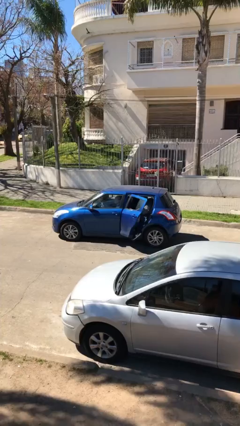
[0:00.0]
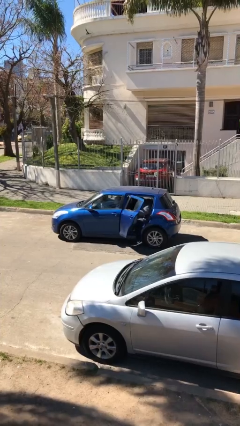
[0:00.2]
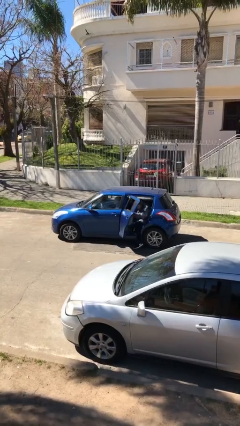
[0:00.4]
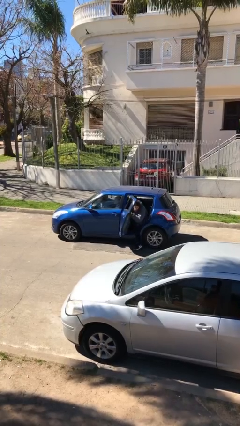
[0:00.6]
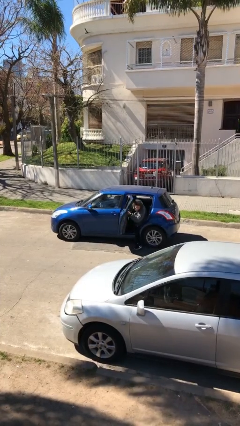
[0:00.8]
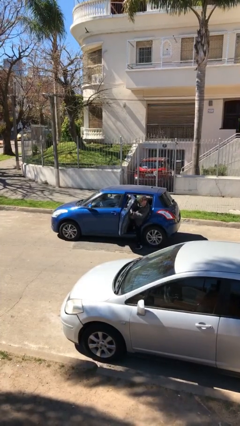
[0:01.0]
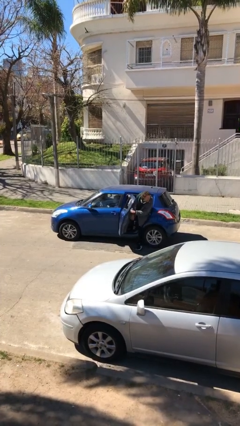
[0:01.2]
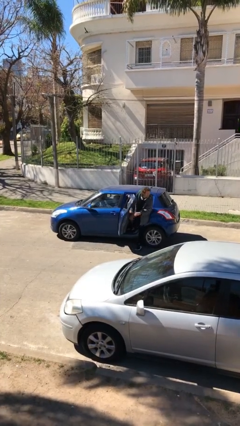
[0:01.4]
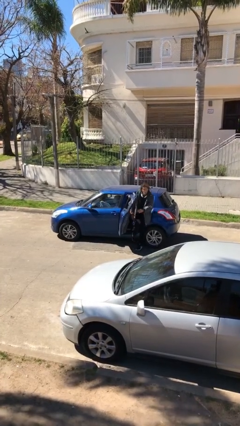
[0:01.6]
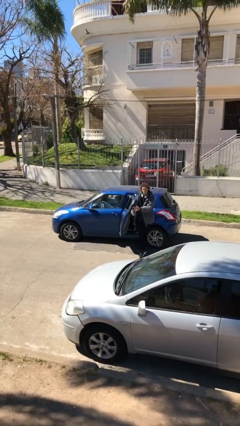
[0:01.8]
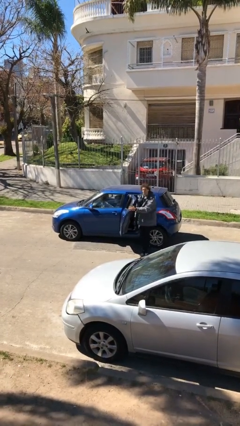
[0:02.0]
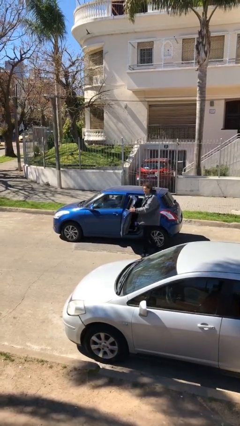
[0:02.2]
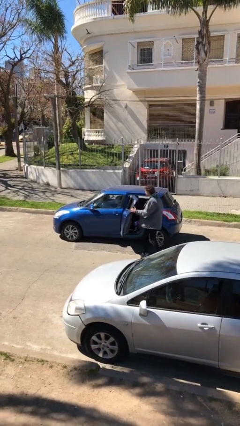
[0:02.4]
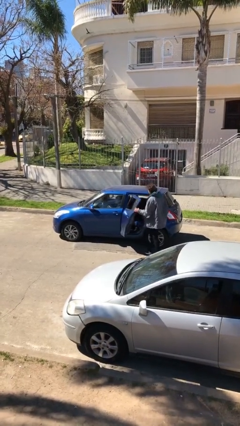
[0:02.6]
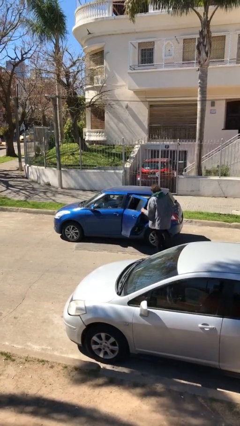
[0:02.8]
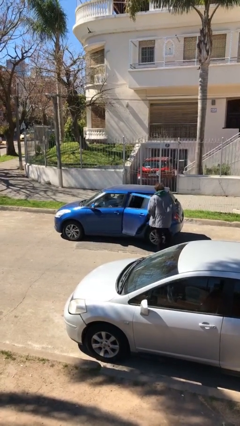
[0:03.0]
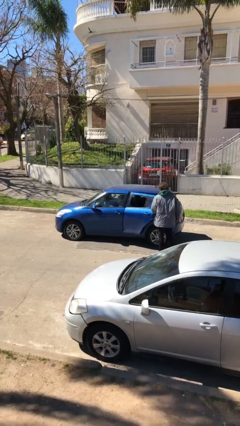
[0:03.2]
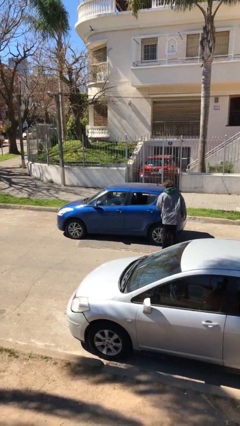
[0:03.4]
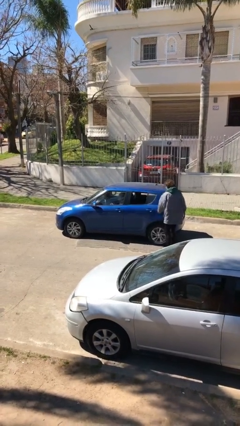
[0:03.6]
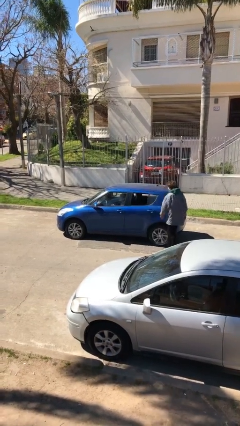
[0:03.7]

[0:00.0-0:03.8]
car drops off person

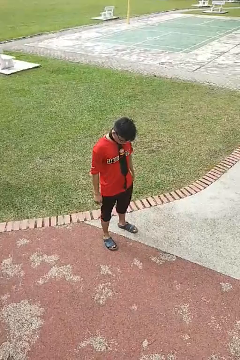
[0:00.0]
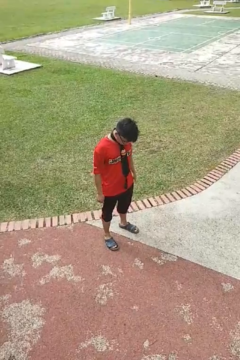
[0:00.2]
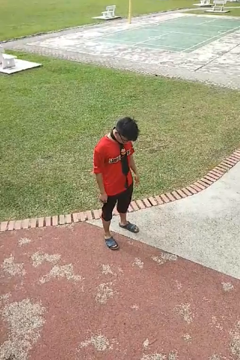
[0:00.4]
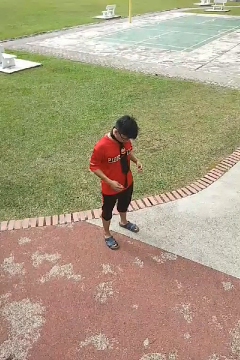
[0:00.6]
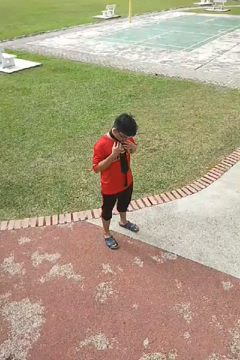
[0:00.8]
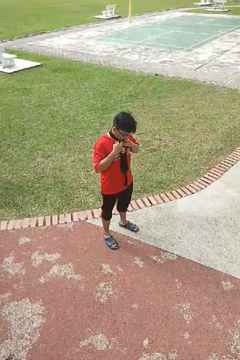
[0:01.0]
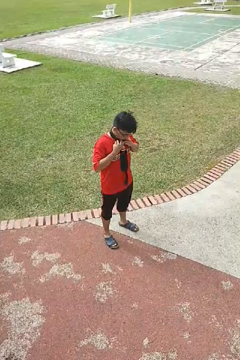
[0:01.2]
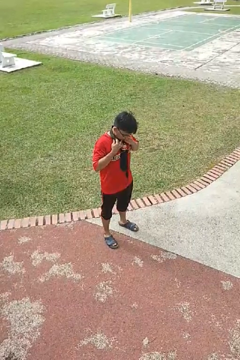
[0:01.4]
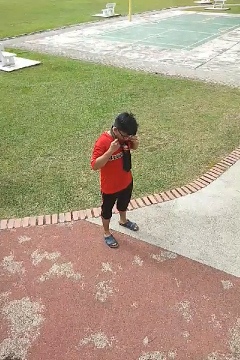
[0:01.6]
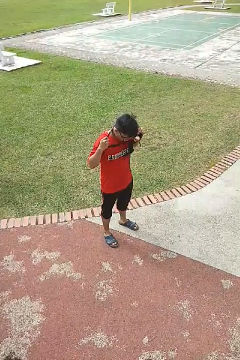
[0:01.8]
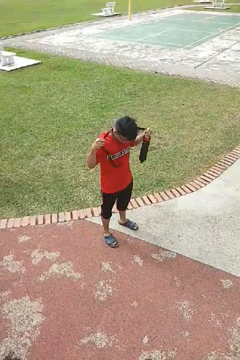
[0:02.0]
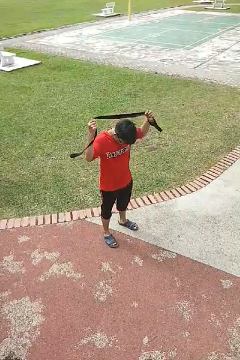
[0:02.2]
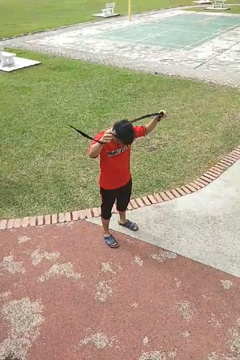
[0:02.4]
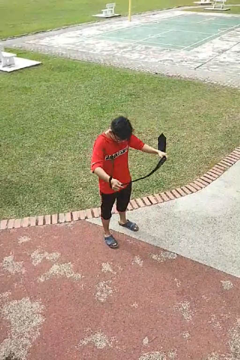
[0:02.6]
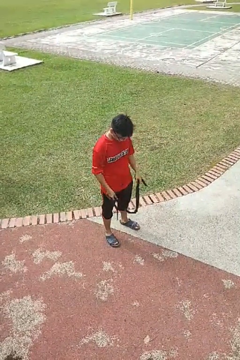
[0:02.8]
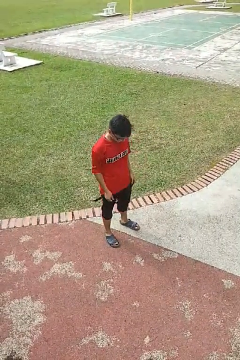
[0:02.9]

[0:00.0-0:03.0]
person takes off necktie

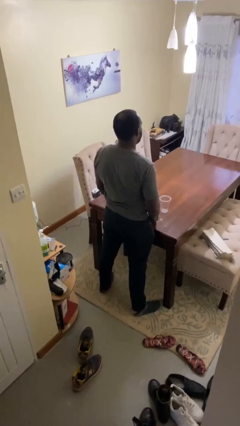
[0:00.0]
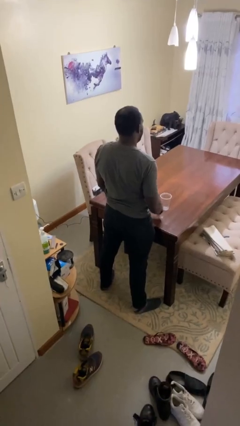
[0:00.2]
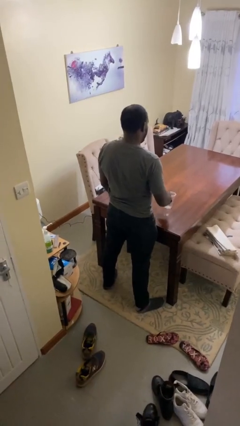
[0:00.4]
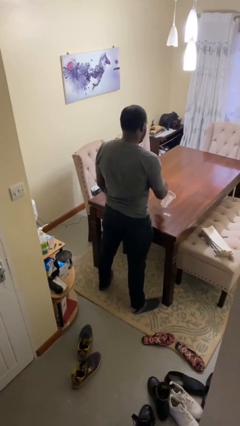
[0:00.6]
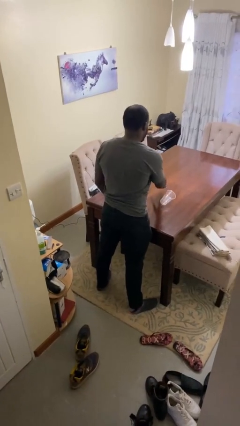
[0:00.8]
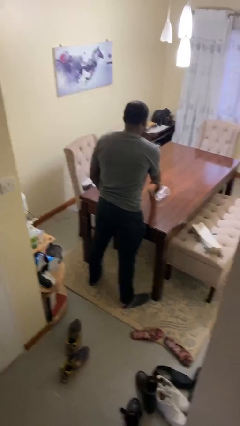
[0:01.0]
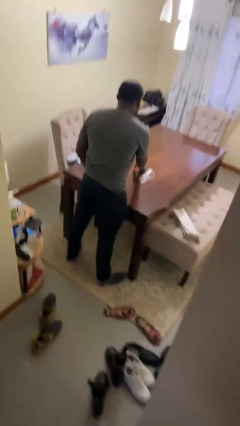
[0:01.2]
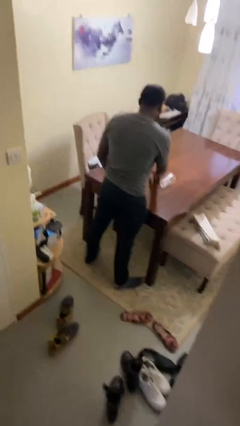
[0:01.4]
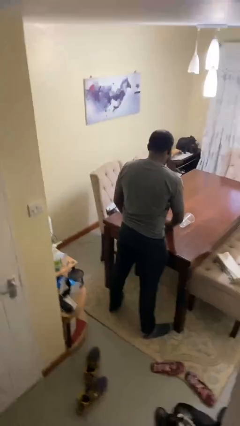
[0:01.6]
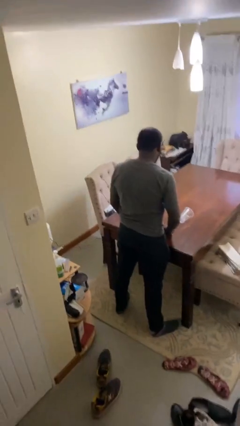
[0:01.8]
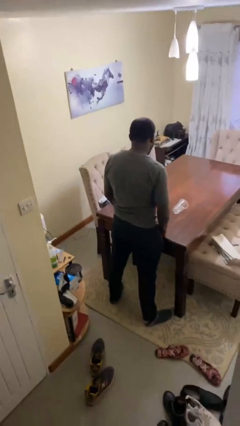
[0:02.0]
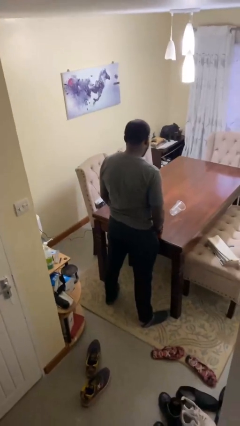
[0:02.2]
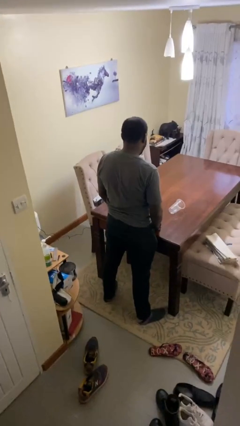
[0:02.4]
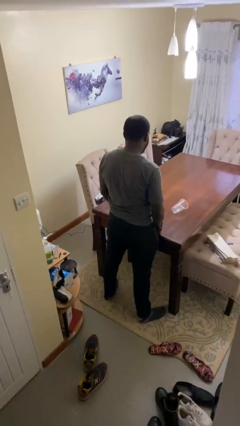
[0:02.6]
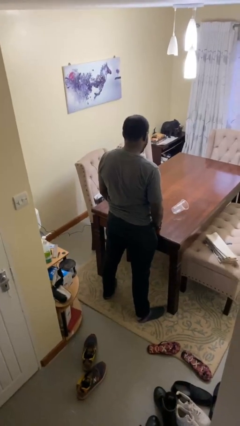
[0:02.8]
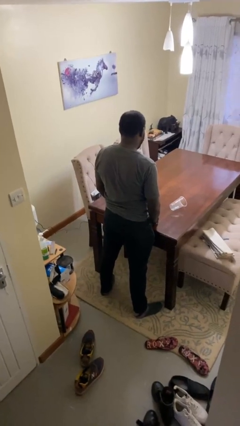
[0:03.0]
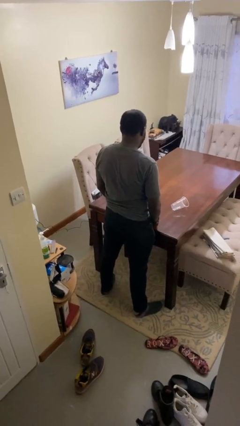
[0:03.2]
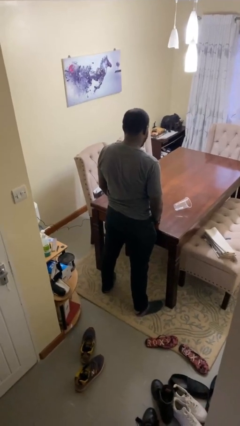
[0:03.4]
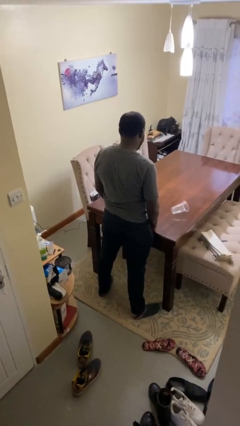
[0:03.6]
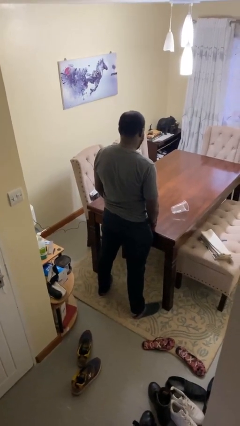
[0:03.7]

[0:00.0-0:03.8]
person knocks over glass

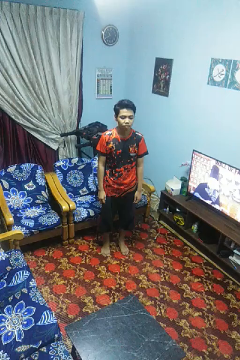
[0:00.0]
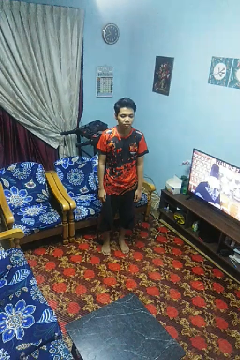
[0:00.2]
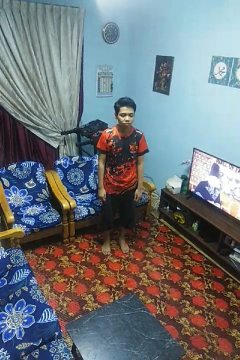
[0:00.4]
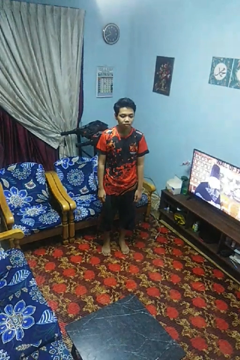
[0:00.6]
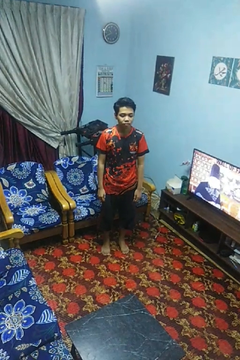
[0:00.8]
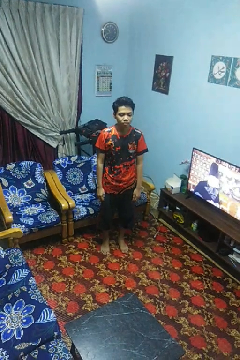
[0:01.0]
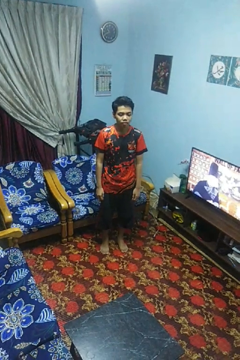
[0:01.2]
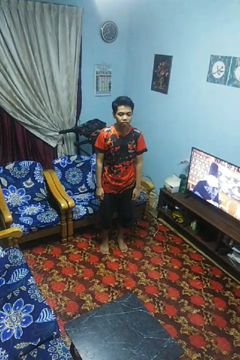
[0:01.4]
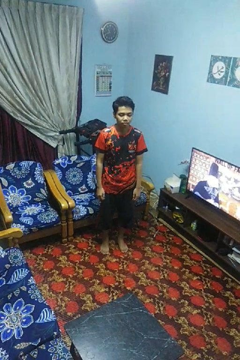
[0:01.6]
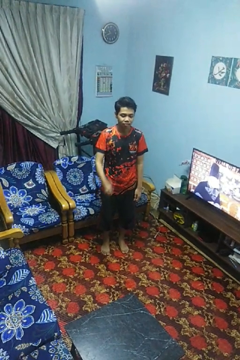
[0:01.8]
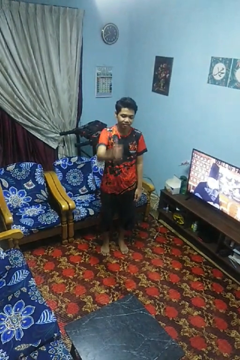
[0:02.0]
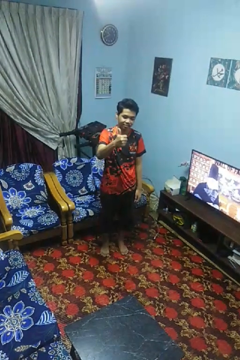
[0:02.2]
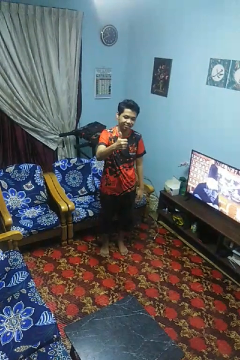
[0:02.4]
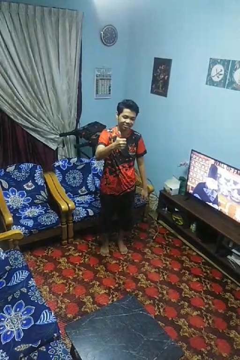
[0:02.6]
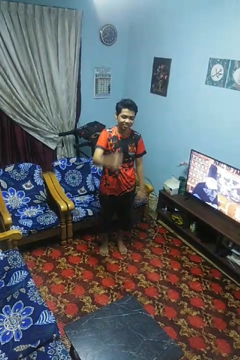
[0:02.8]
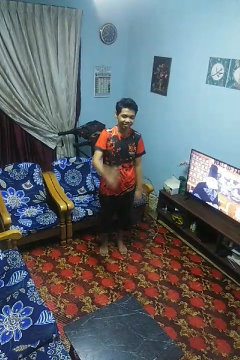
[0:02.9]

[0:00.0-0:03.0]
person gestures thumbs up

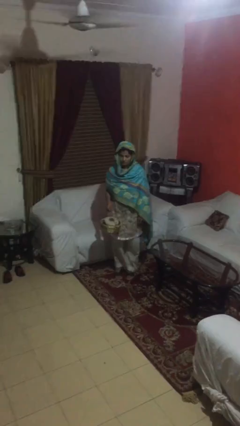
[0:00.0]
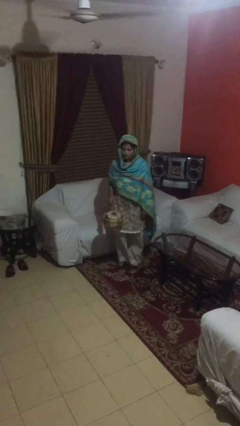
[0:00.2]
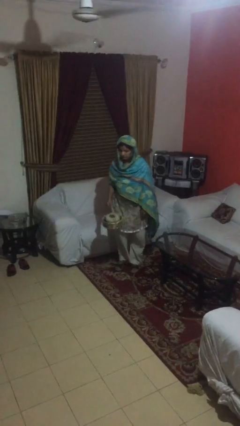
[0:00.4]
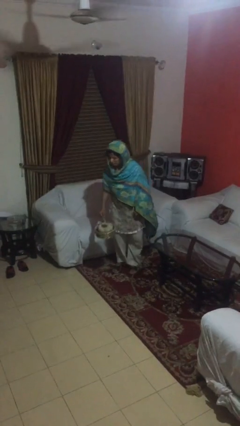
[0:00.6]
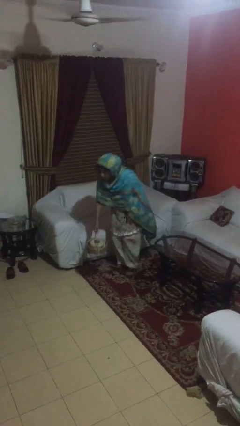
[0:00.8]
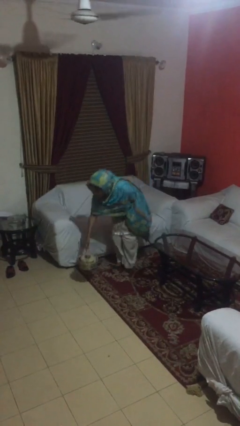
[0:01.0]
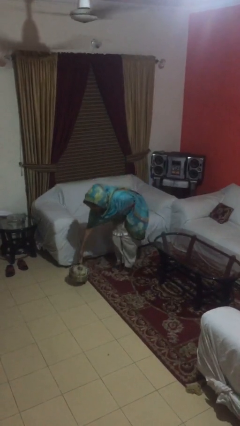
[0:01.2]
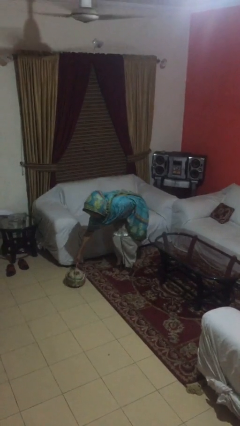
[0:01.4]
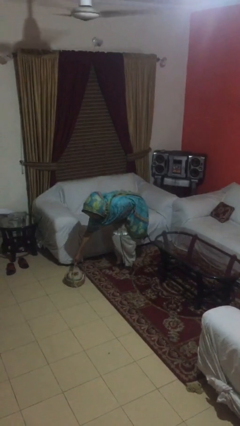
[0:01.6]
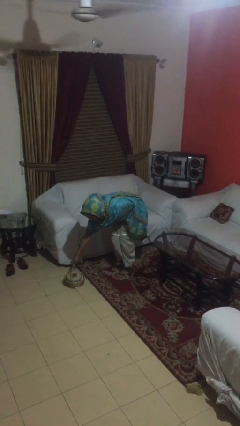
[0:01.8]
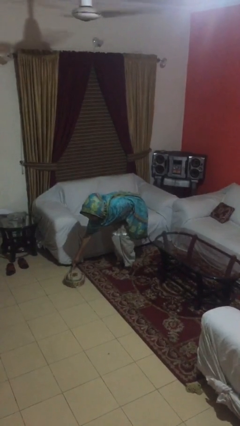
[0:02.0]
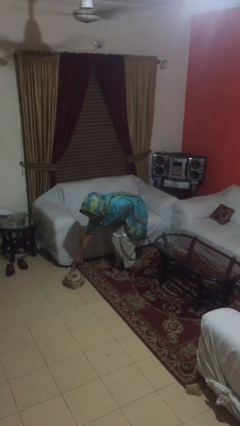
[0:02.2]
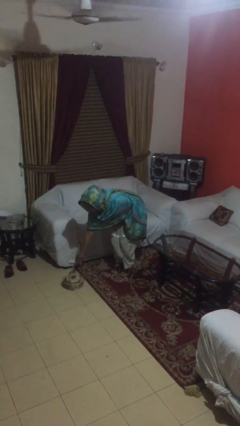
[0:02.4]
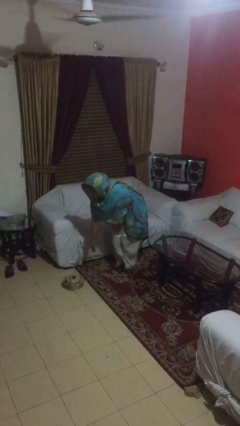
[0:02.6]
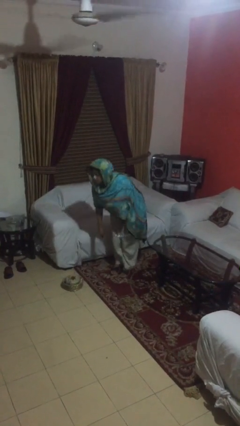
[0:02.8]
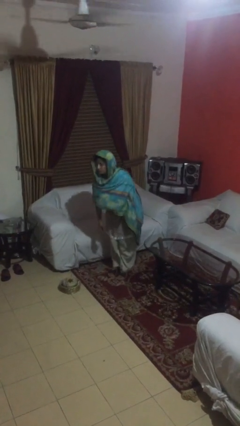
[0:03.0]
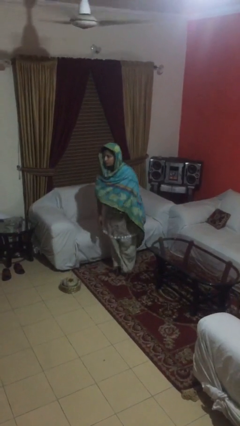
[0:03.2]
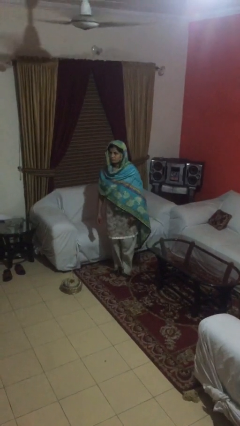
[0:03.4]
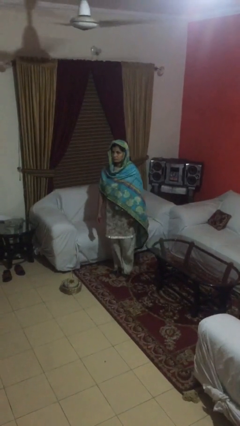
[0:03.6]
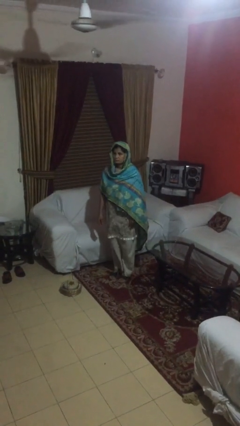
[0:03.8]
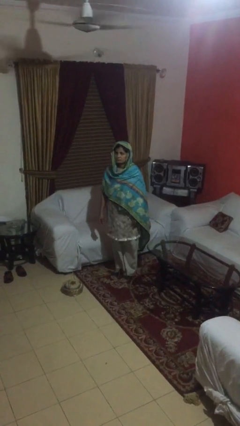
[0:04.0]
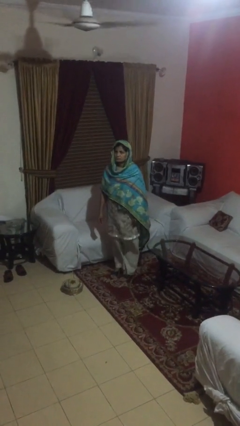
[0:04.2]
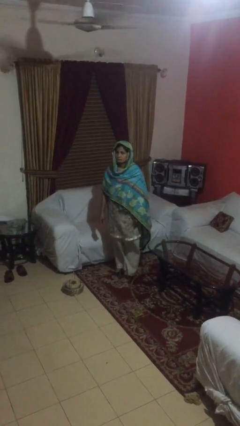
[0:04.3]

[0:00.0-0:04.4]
person puts down object on floor

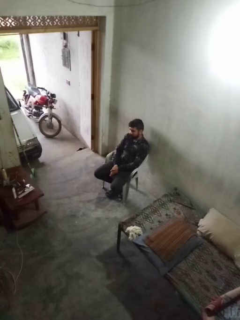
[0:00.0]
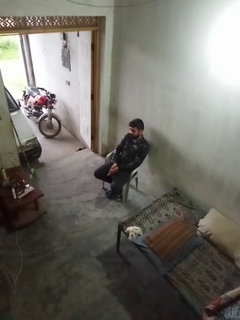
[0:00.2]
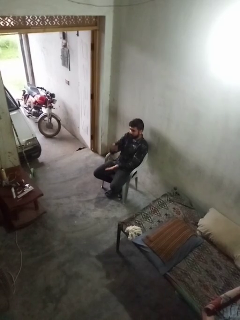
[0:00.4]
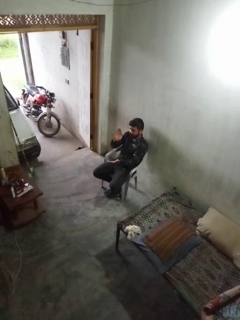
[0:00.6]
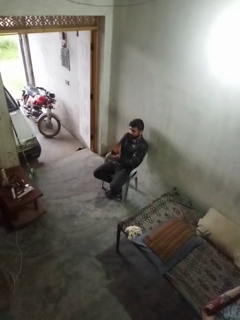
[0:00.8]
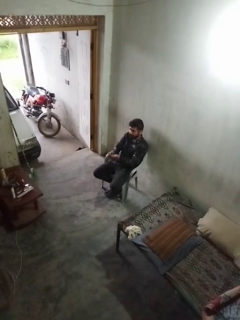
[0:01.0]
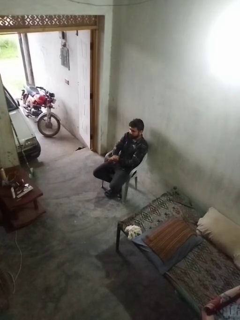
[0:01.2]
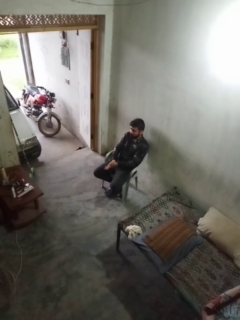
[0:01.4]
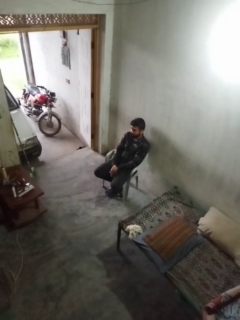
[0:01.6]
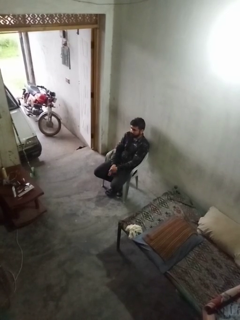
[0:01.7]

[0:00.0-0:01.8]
person claps hands
